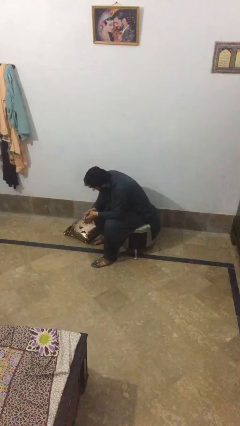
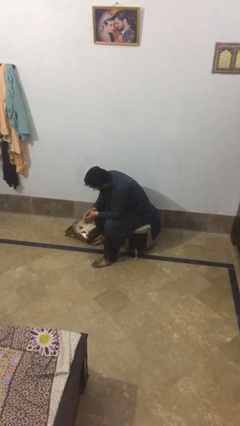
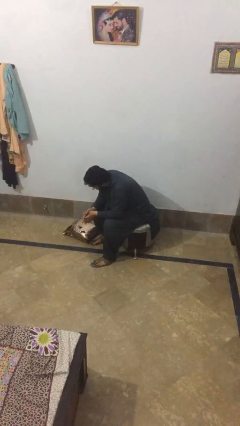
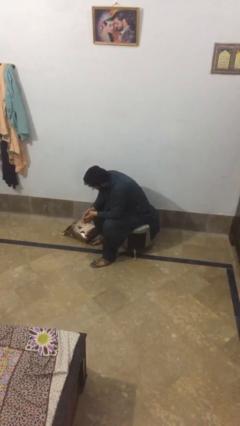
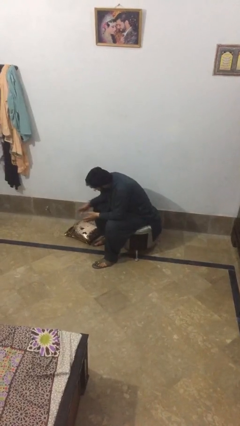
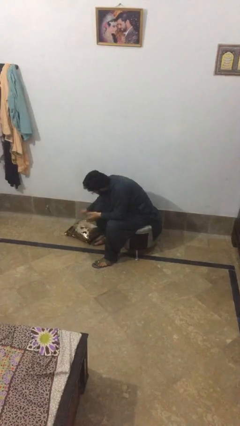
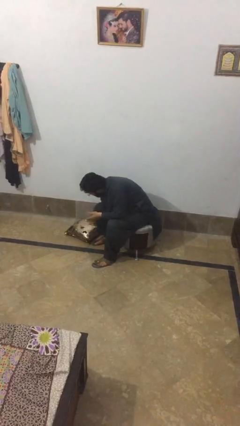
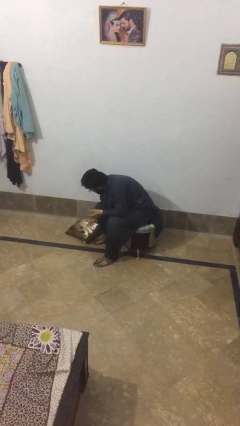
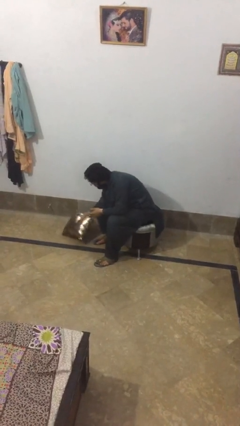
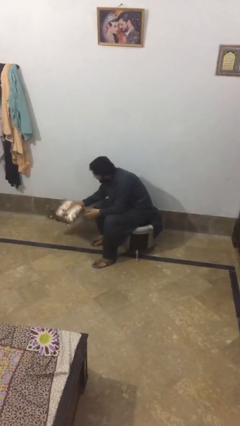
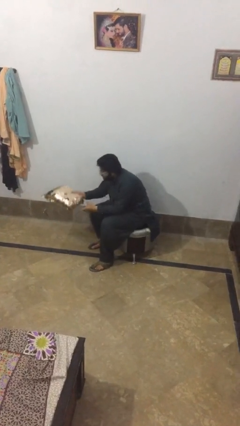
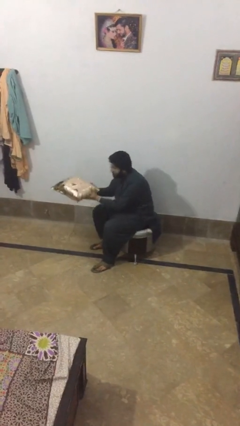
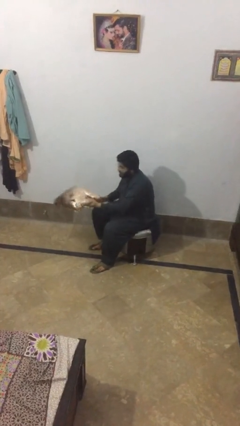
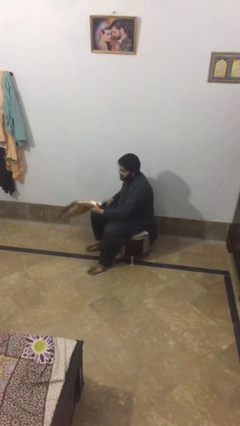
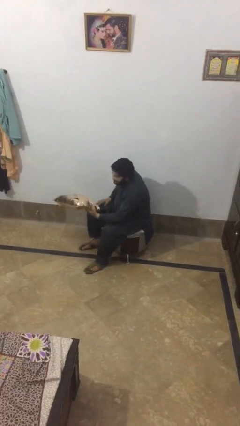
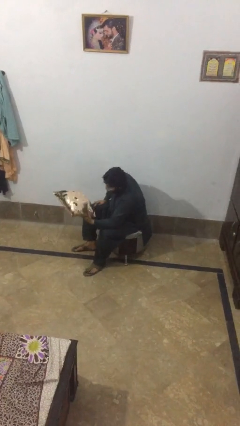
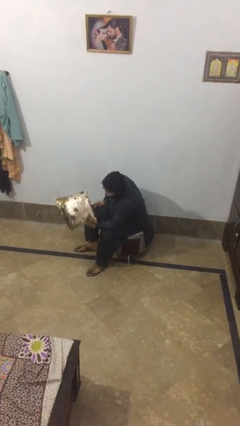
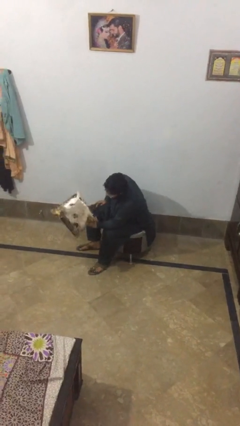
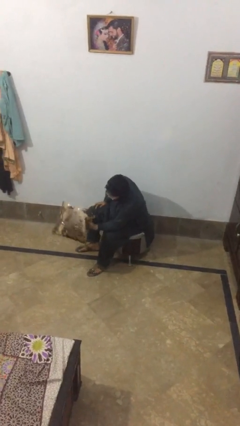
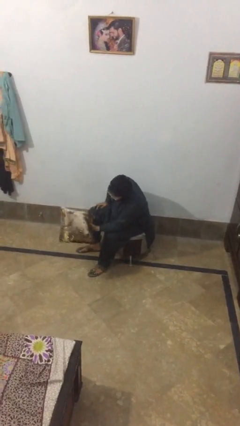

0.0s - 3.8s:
person picks up object from floor

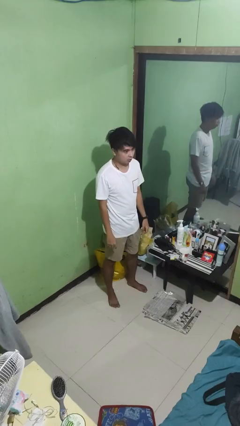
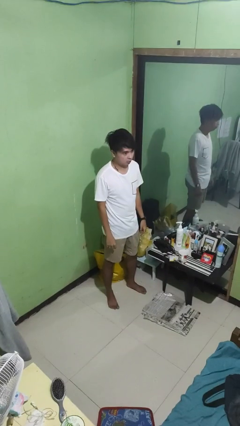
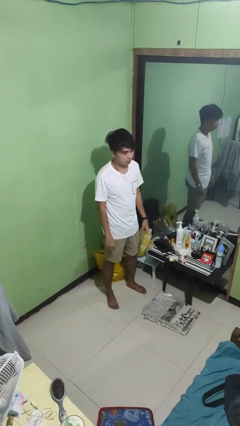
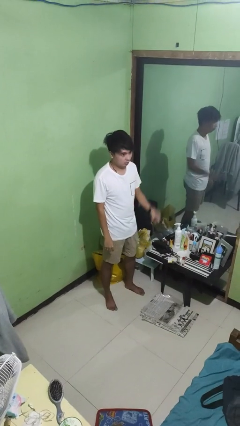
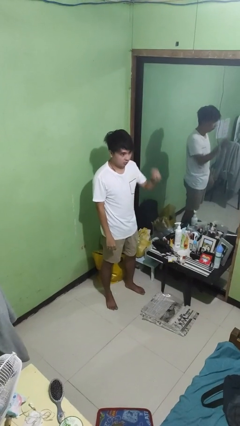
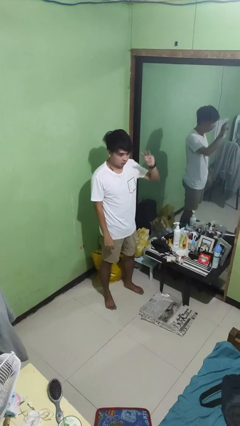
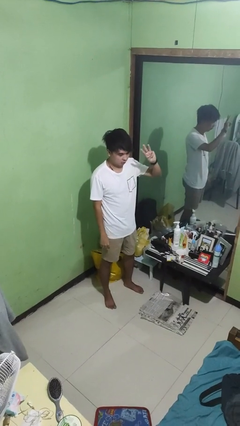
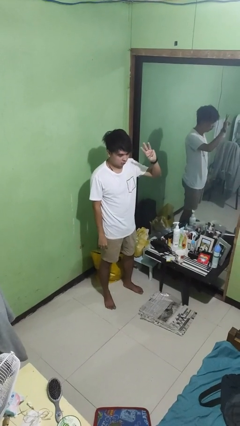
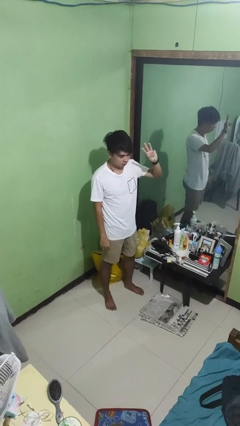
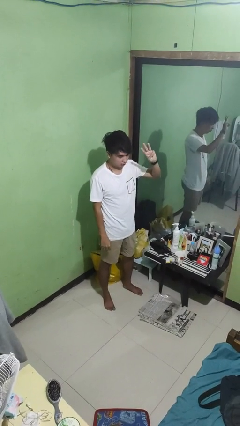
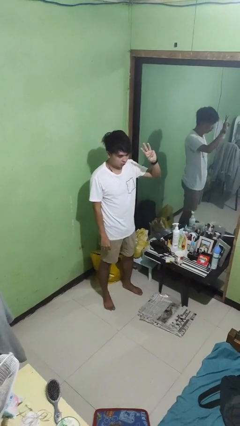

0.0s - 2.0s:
person gestures number three

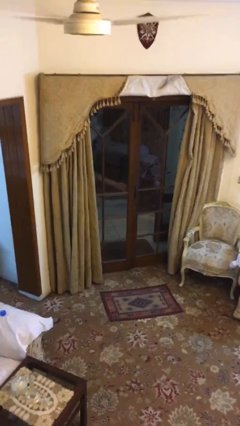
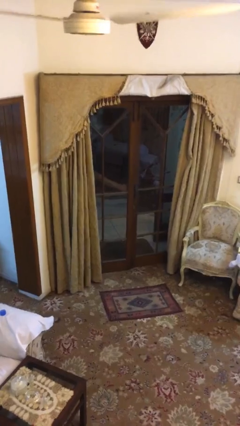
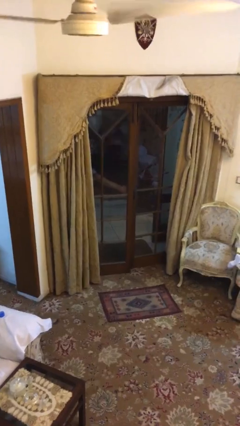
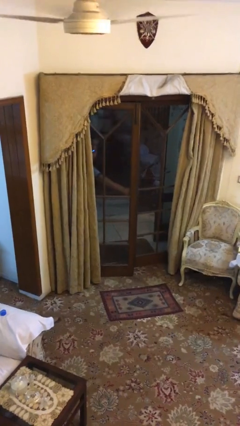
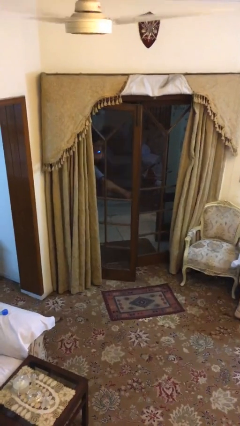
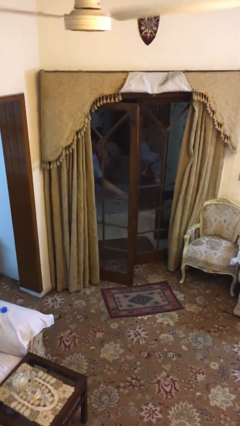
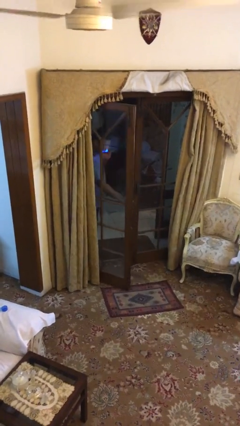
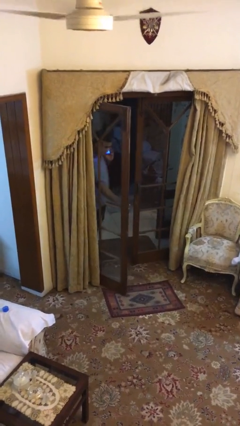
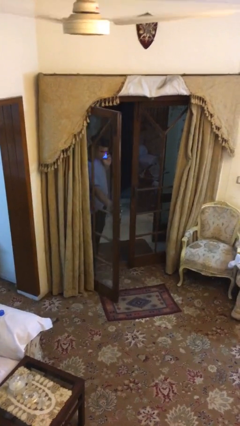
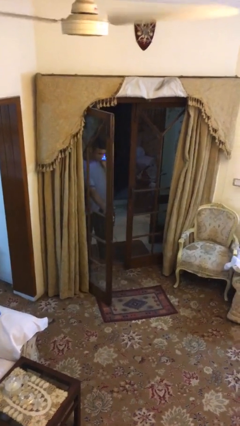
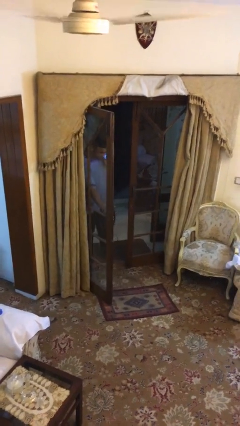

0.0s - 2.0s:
person opens facility door

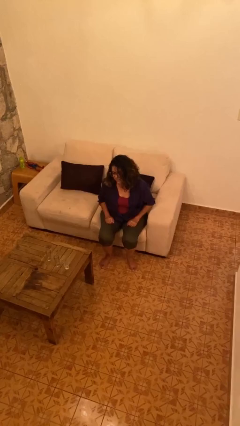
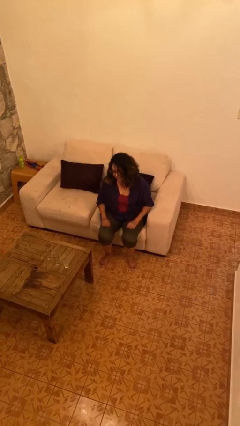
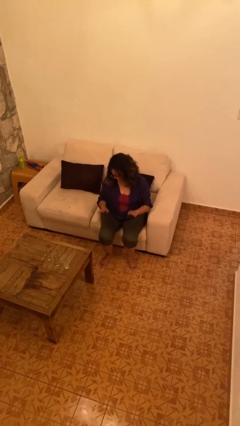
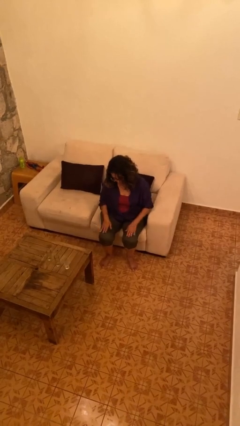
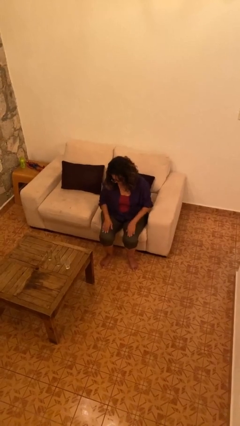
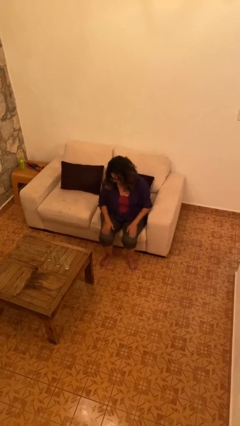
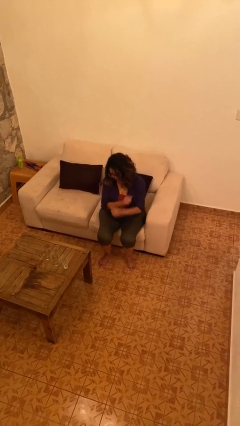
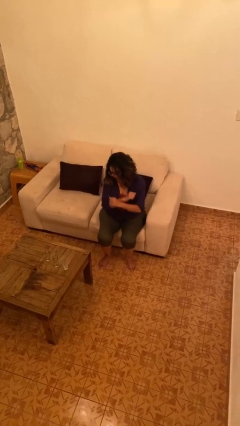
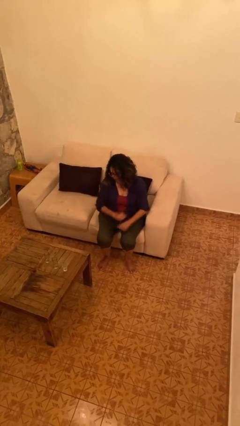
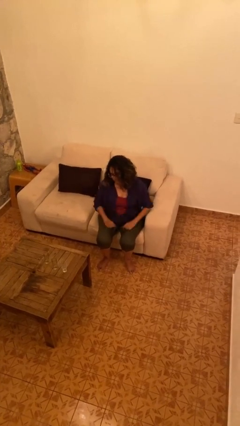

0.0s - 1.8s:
person slaps hands on thighs

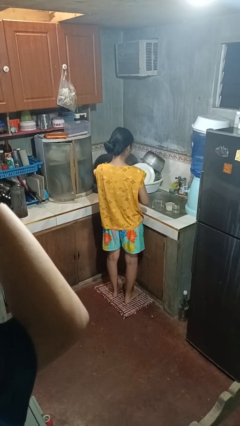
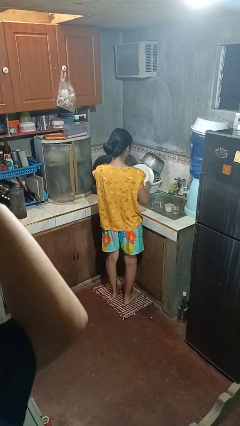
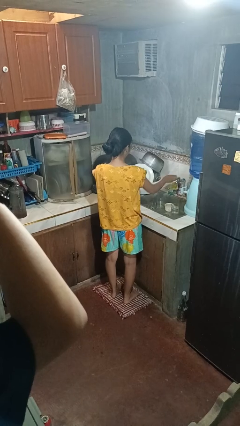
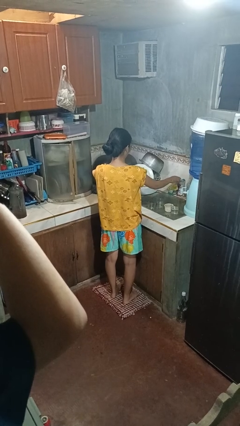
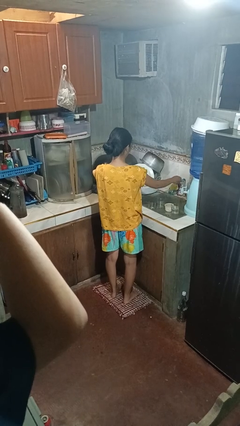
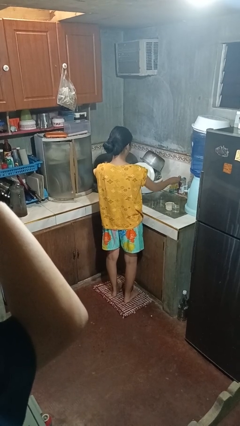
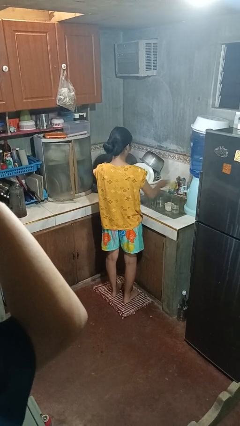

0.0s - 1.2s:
person turns on faucet

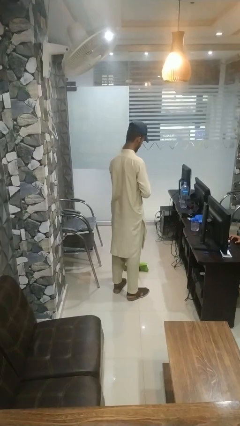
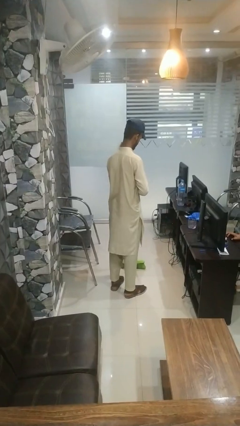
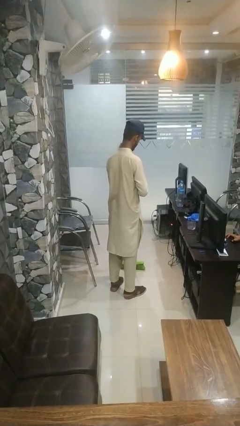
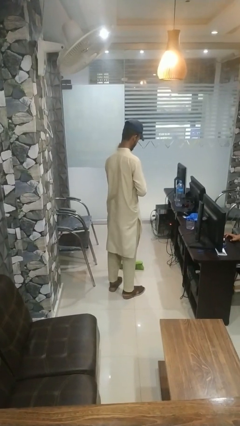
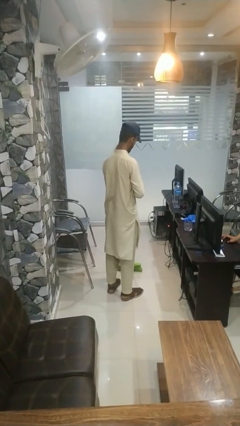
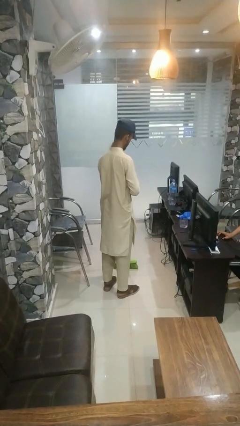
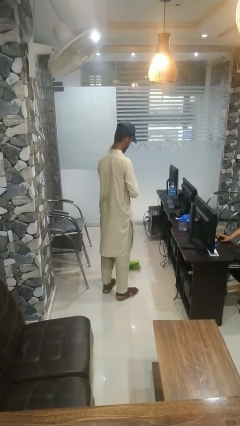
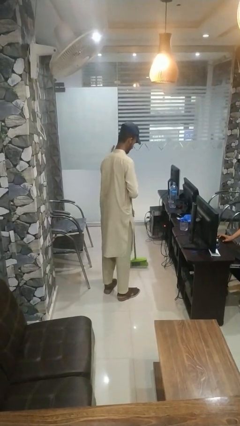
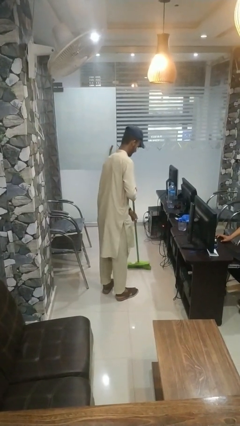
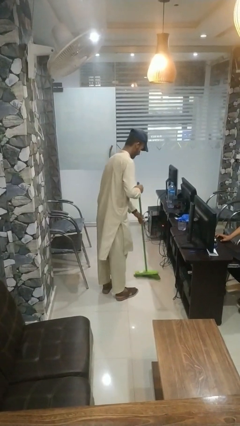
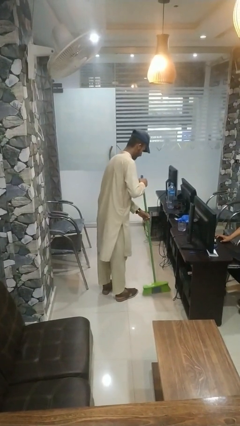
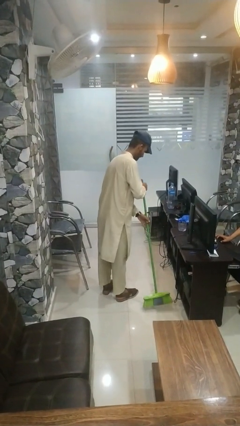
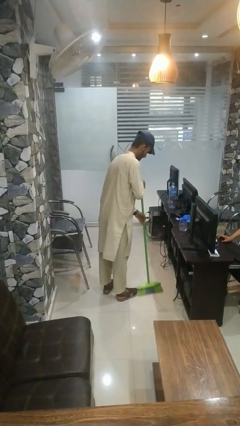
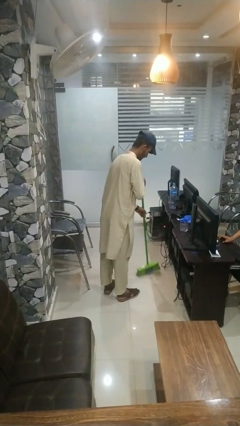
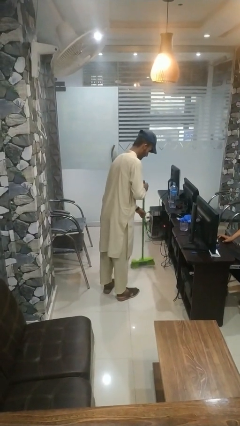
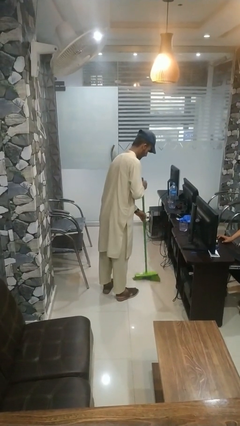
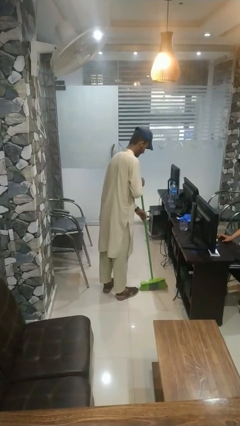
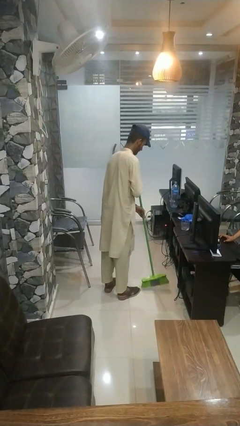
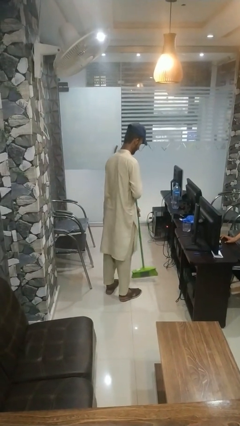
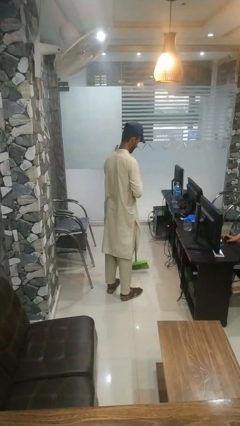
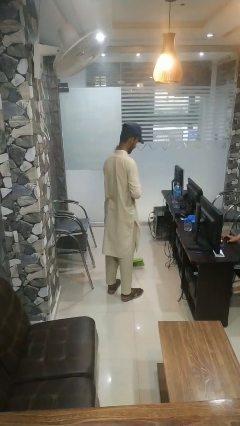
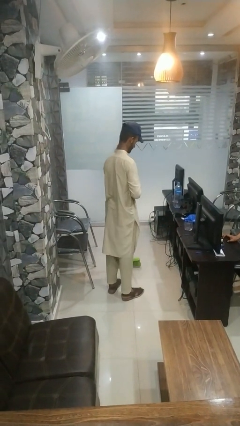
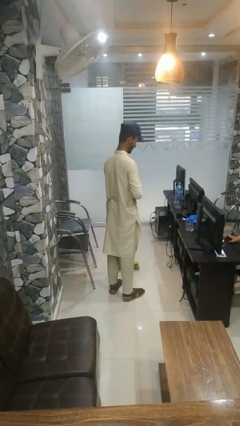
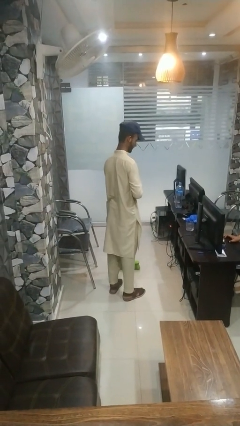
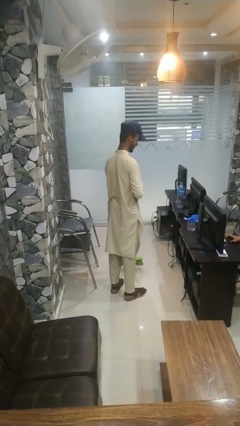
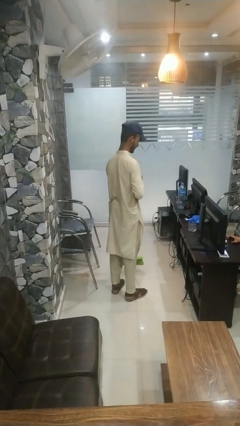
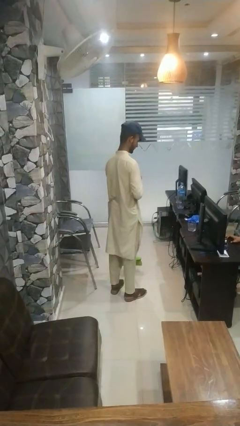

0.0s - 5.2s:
person sweeps floor

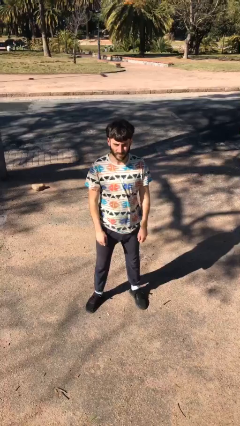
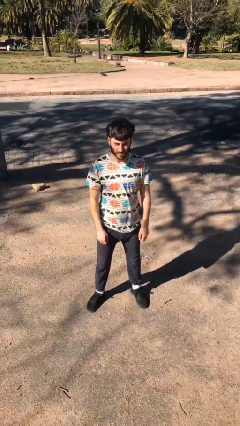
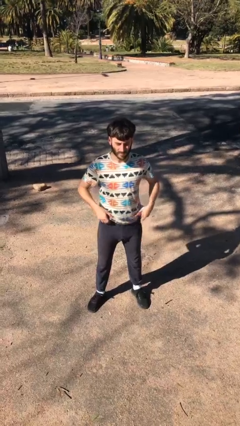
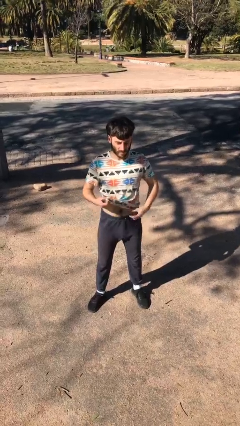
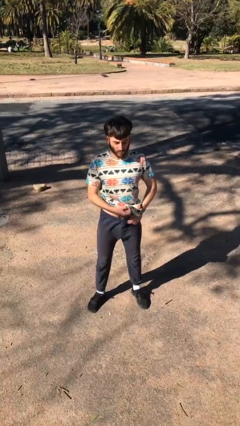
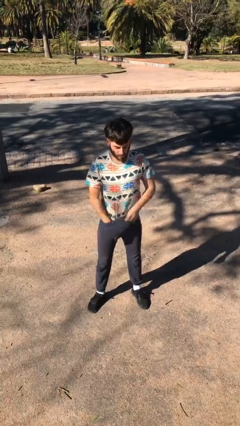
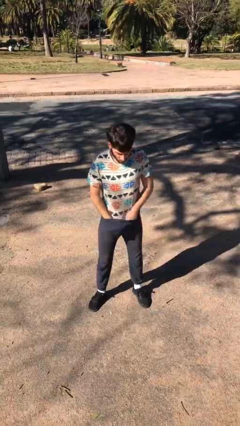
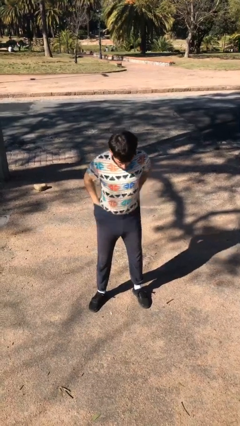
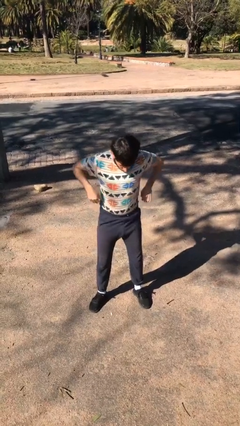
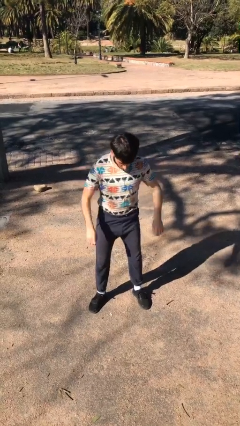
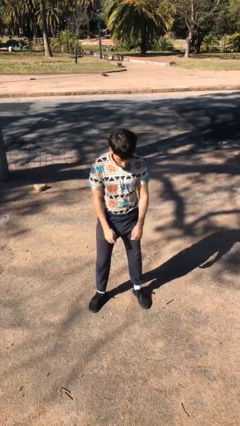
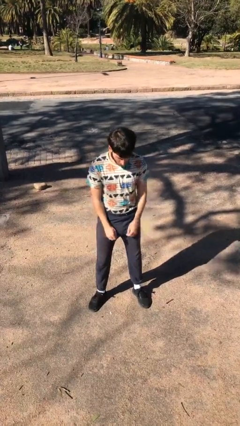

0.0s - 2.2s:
person tucks in shirt
